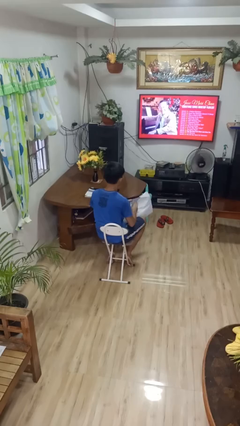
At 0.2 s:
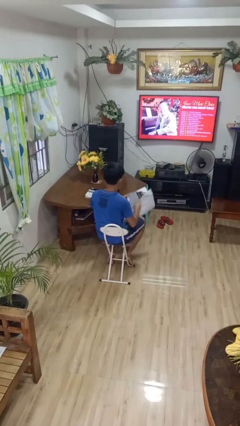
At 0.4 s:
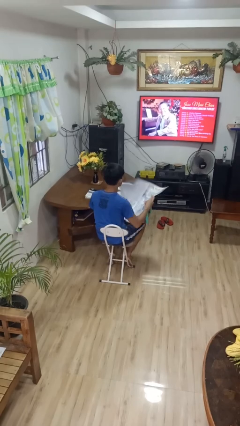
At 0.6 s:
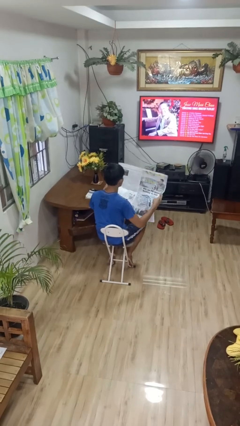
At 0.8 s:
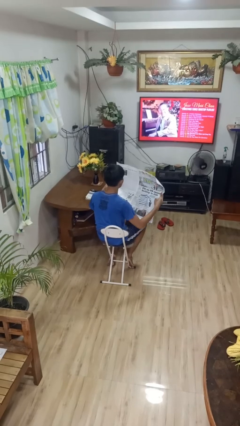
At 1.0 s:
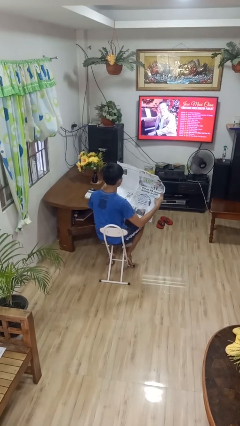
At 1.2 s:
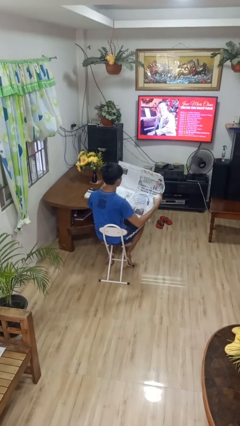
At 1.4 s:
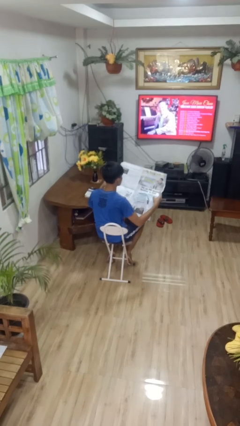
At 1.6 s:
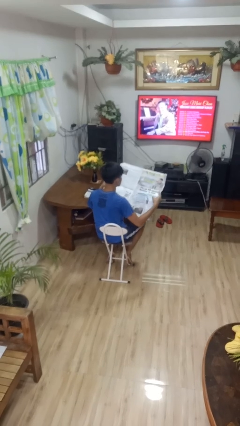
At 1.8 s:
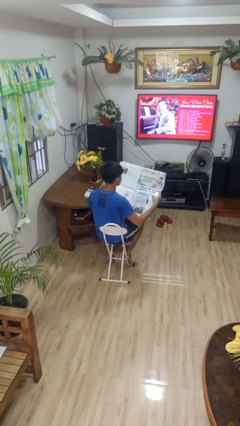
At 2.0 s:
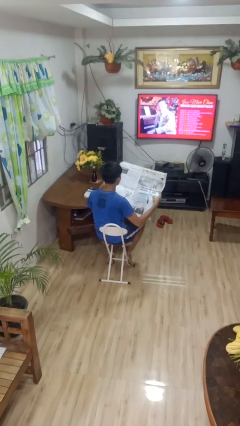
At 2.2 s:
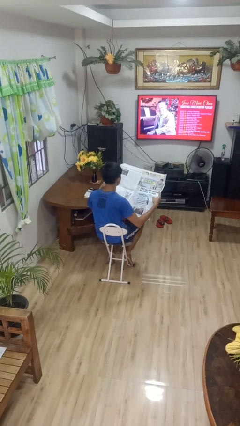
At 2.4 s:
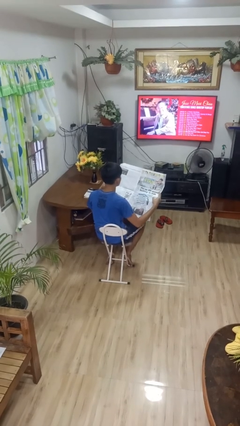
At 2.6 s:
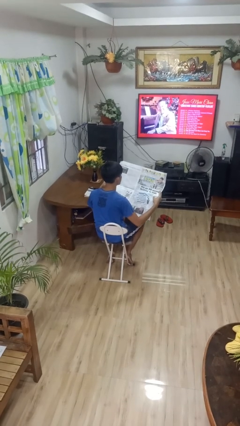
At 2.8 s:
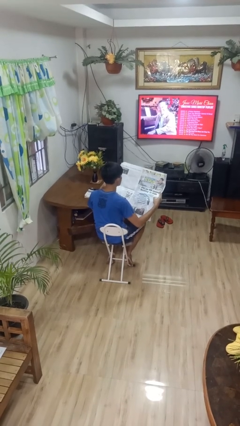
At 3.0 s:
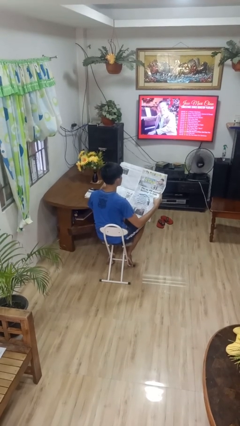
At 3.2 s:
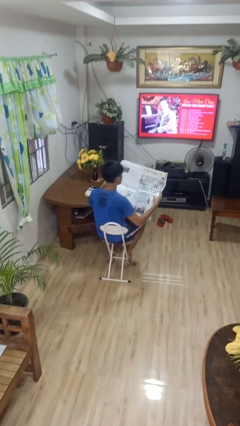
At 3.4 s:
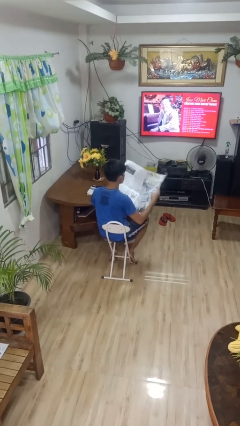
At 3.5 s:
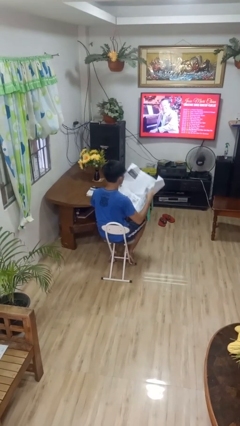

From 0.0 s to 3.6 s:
person reads newspaper

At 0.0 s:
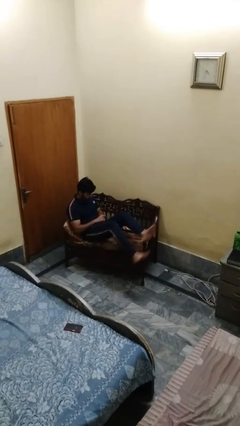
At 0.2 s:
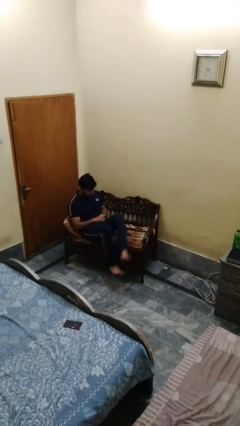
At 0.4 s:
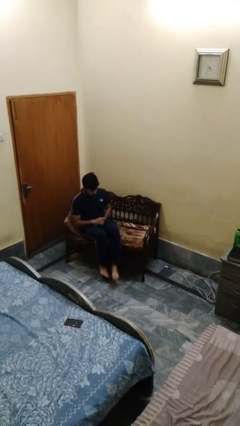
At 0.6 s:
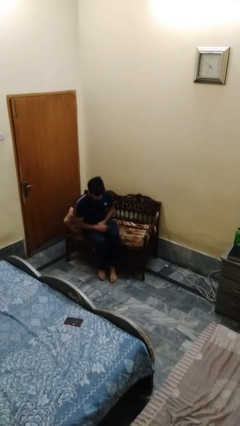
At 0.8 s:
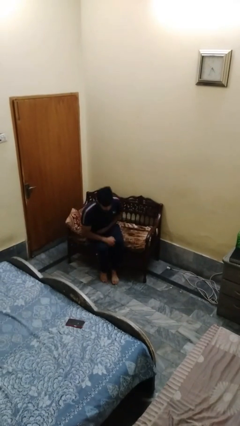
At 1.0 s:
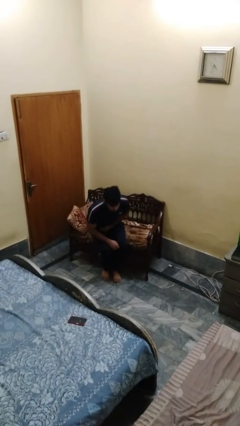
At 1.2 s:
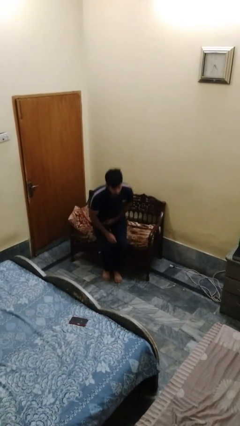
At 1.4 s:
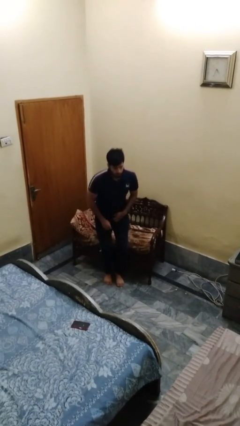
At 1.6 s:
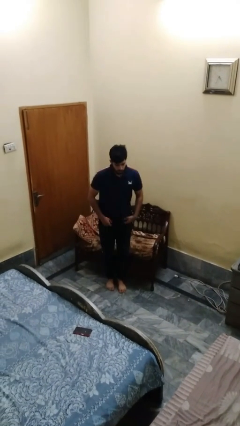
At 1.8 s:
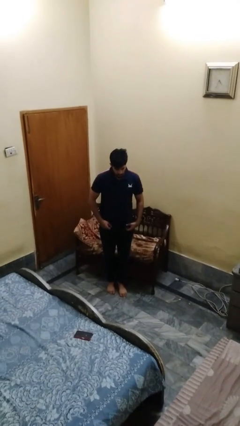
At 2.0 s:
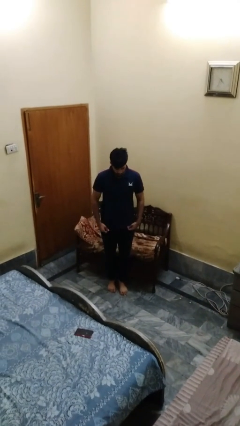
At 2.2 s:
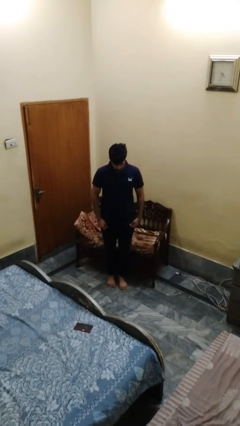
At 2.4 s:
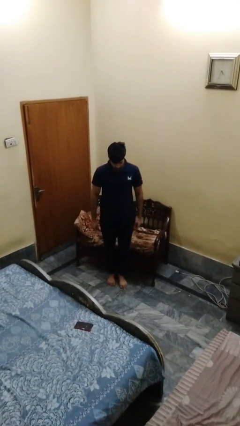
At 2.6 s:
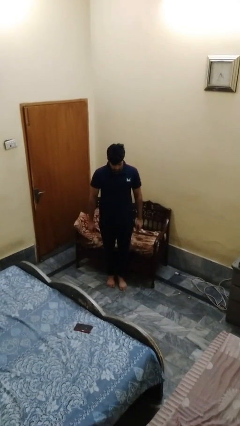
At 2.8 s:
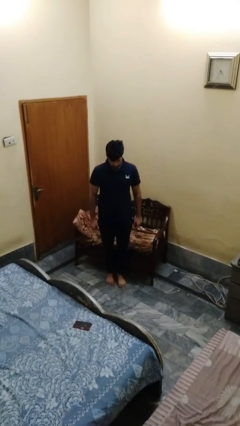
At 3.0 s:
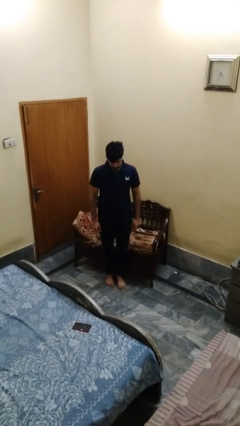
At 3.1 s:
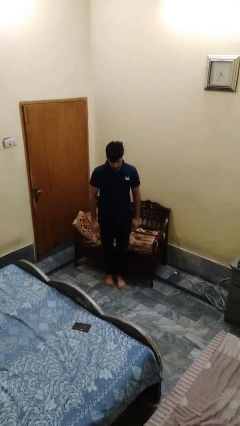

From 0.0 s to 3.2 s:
person stands up

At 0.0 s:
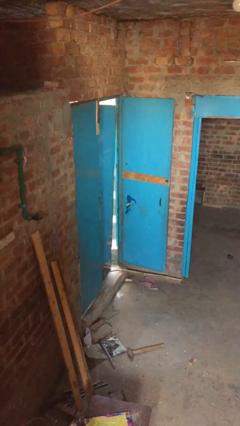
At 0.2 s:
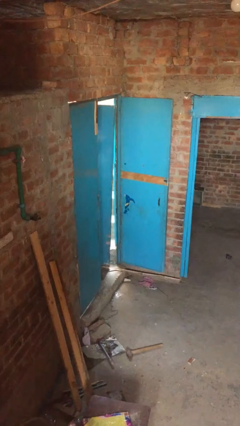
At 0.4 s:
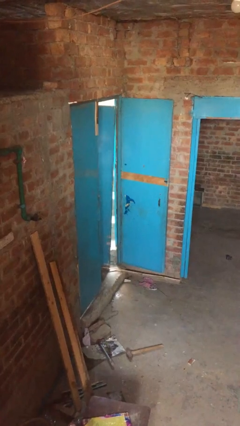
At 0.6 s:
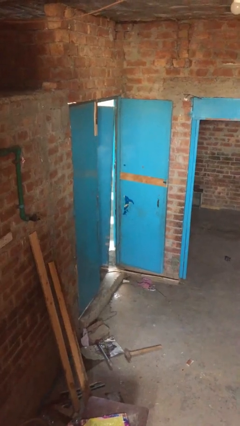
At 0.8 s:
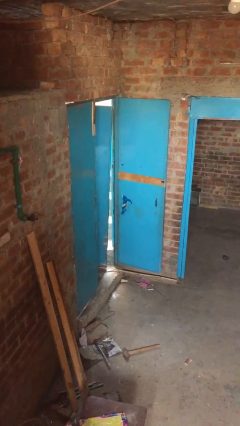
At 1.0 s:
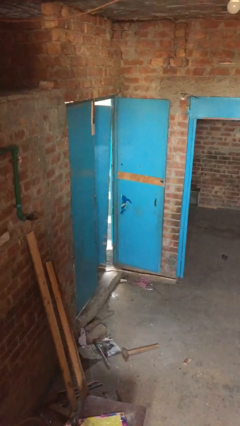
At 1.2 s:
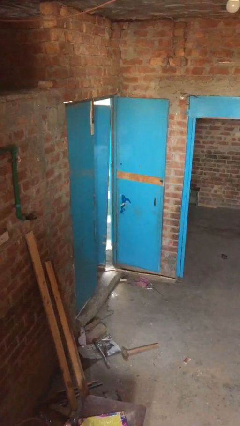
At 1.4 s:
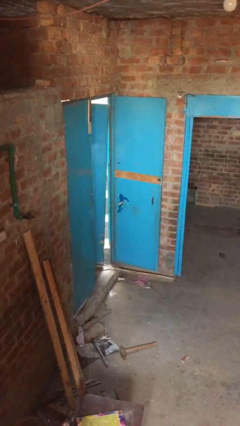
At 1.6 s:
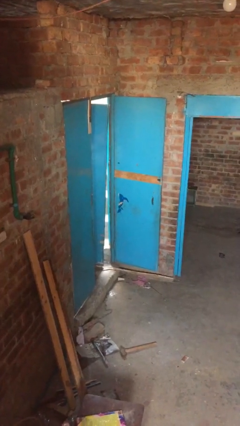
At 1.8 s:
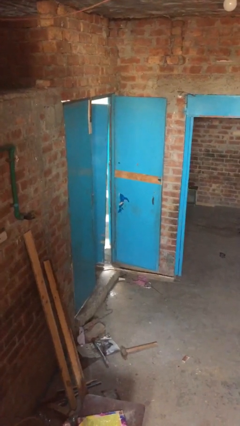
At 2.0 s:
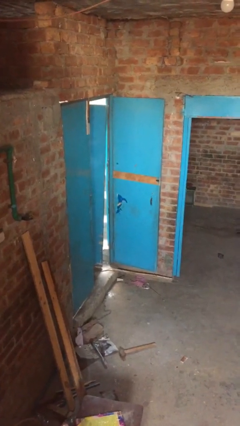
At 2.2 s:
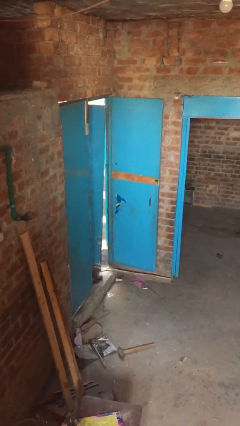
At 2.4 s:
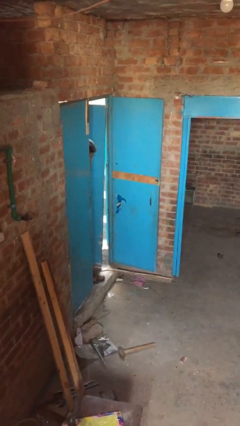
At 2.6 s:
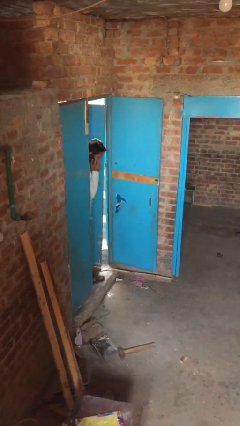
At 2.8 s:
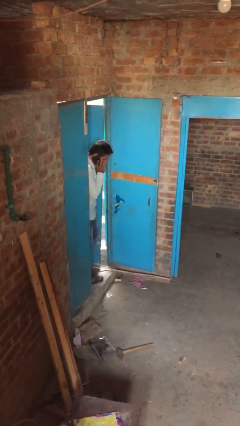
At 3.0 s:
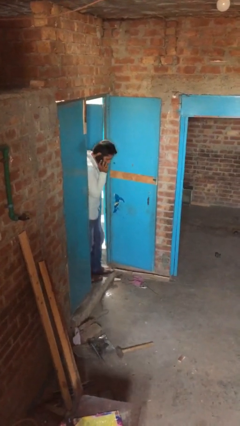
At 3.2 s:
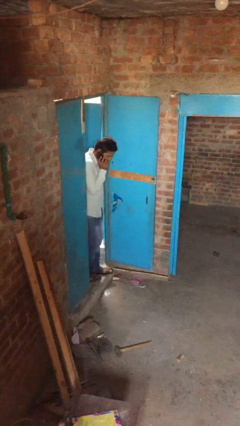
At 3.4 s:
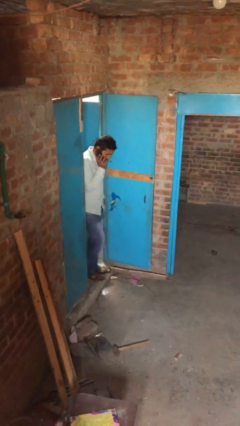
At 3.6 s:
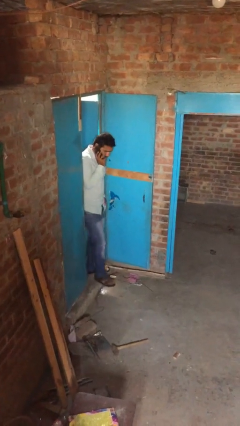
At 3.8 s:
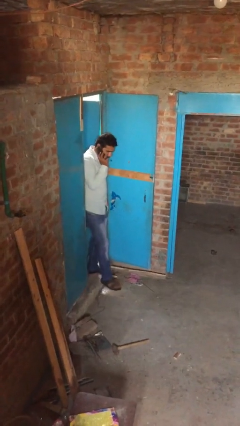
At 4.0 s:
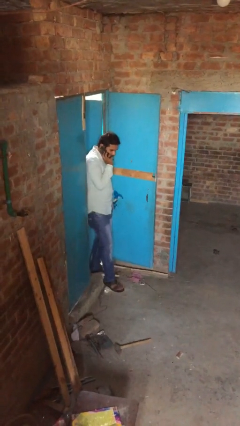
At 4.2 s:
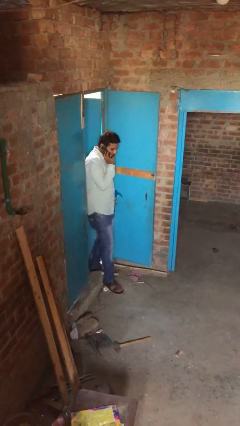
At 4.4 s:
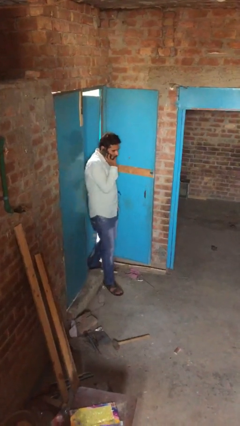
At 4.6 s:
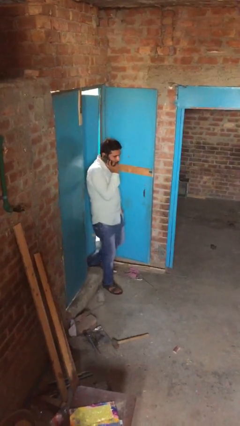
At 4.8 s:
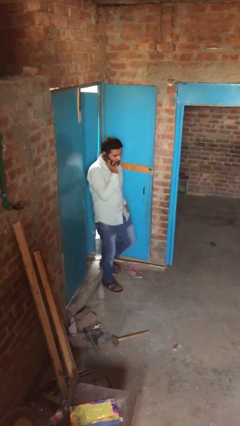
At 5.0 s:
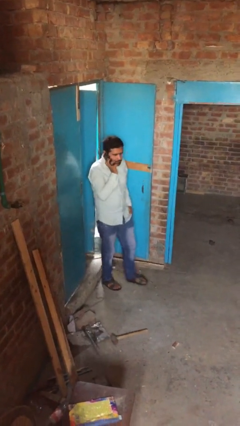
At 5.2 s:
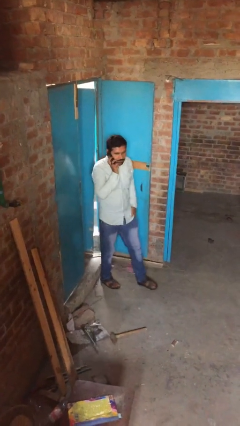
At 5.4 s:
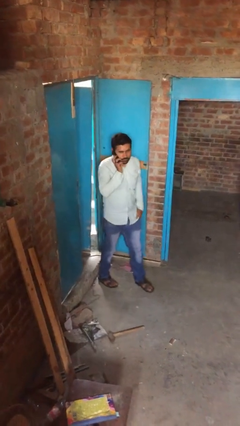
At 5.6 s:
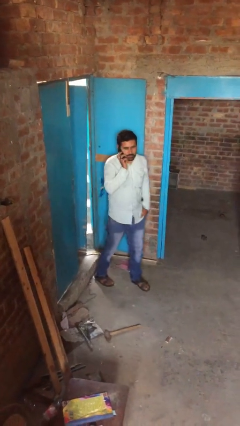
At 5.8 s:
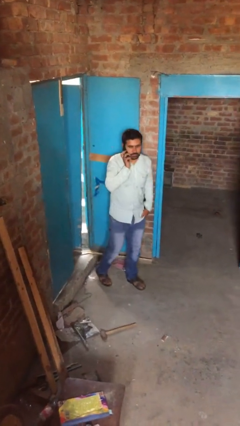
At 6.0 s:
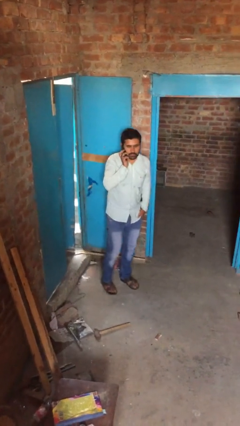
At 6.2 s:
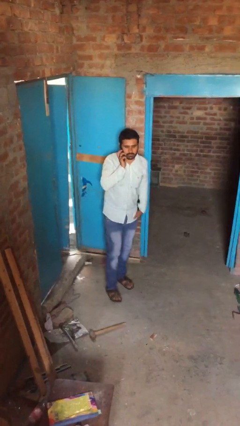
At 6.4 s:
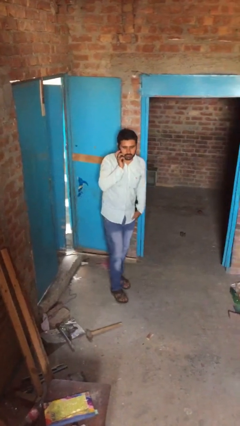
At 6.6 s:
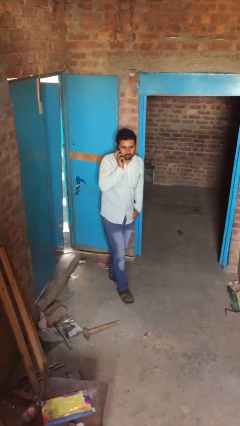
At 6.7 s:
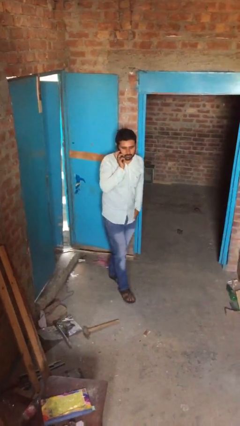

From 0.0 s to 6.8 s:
person enters scene through structure

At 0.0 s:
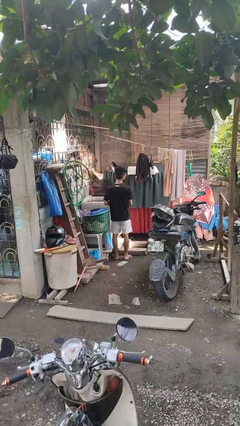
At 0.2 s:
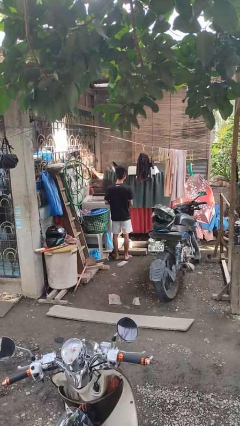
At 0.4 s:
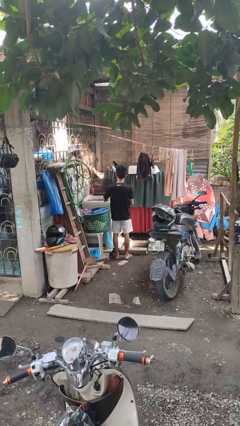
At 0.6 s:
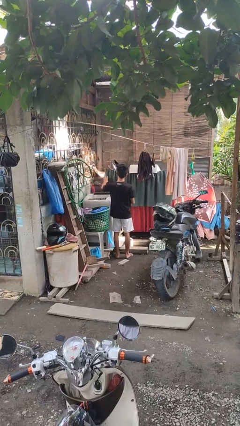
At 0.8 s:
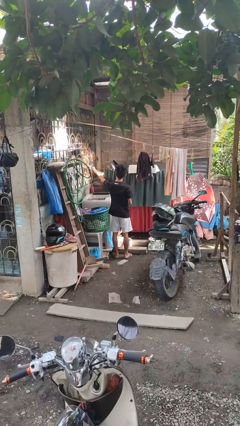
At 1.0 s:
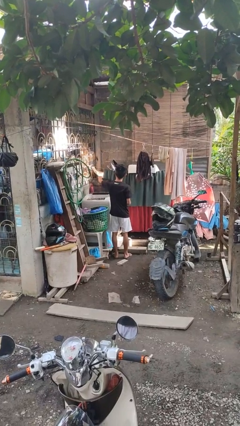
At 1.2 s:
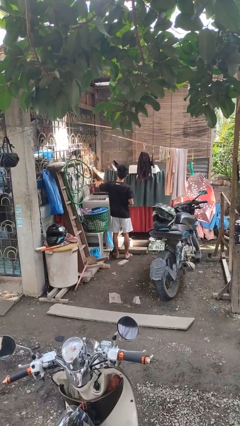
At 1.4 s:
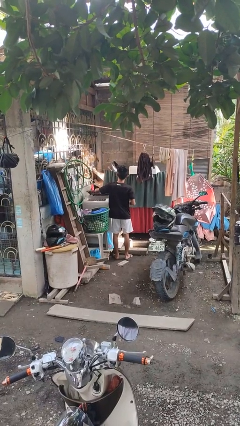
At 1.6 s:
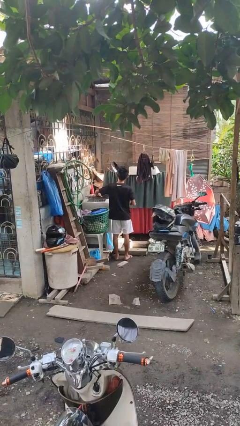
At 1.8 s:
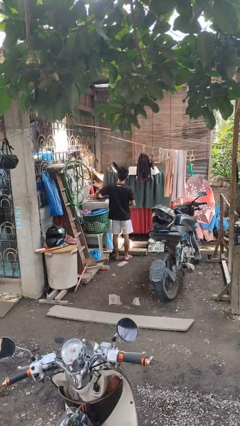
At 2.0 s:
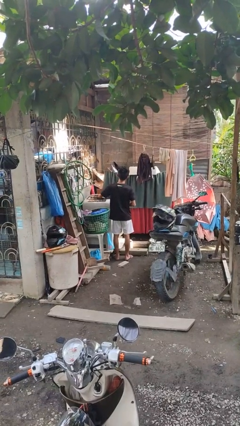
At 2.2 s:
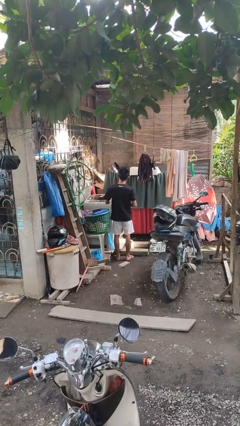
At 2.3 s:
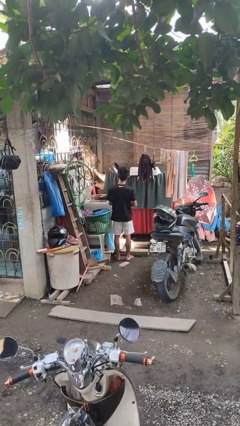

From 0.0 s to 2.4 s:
person closes clothes washer

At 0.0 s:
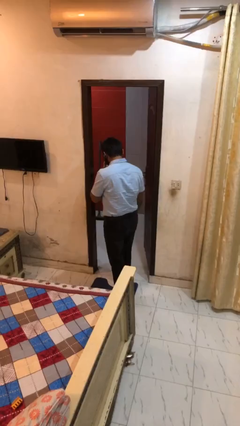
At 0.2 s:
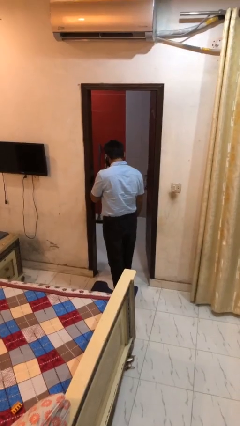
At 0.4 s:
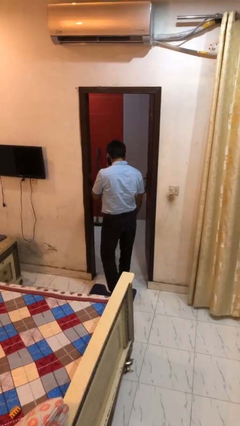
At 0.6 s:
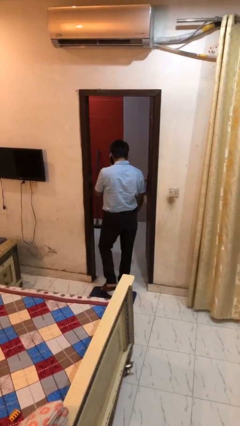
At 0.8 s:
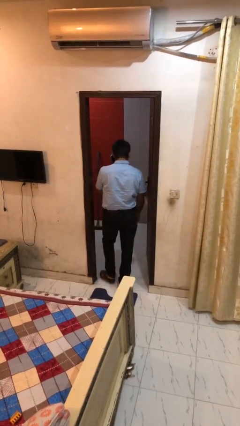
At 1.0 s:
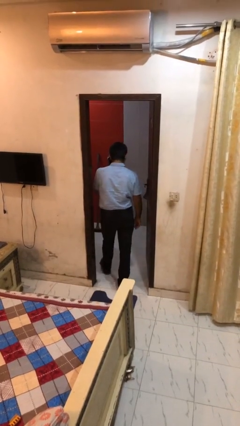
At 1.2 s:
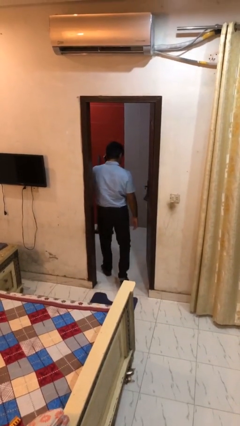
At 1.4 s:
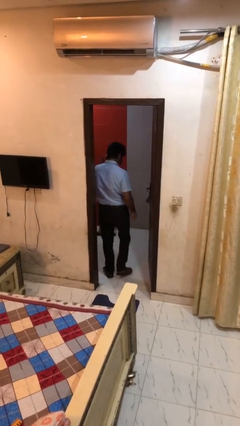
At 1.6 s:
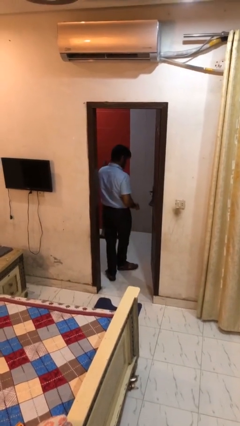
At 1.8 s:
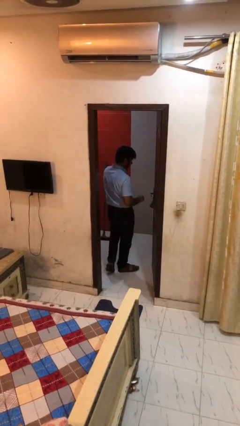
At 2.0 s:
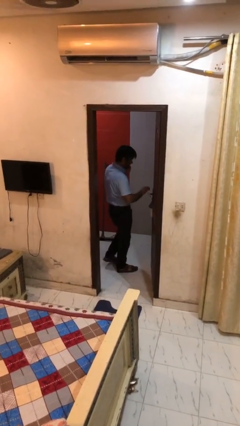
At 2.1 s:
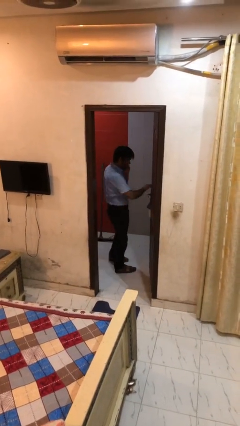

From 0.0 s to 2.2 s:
person exits scene through structure
